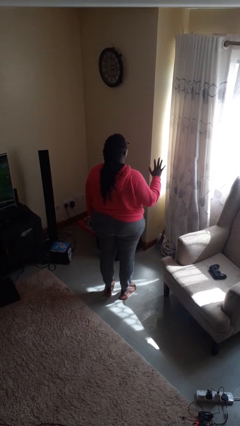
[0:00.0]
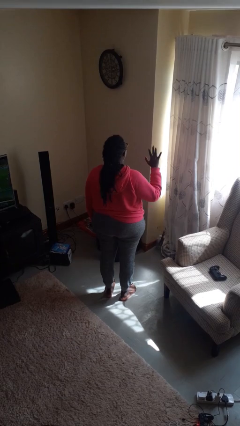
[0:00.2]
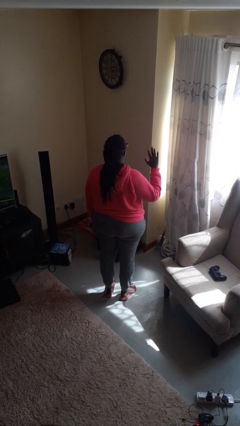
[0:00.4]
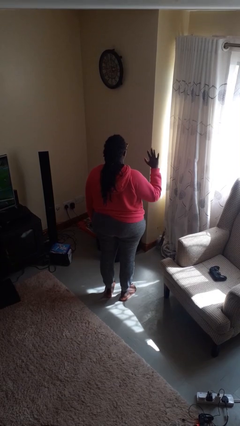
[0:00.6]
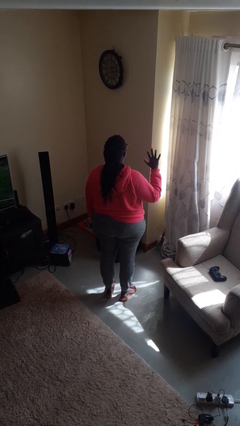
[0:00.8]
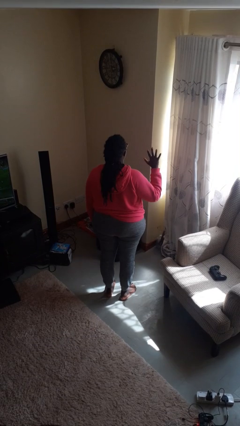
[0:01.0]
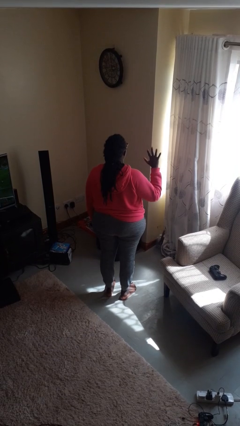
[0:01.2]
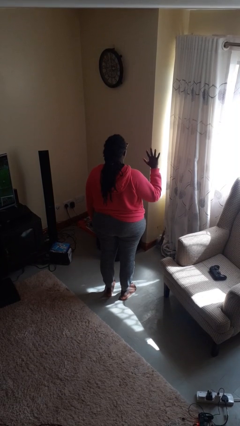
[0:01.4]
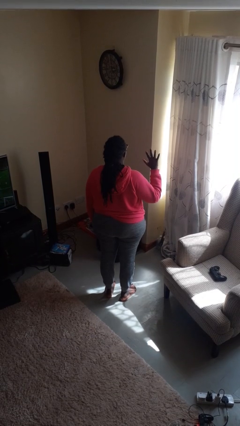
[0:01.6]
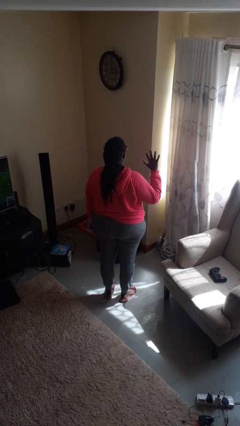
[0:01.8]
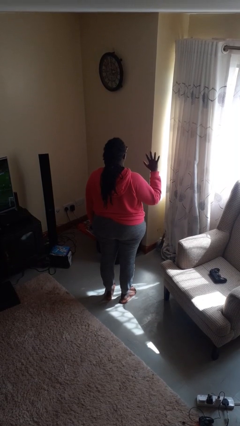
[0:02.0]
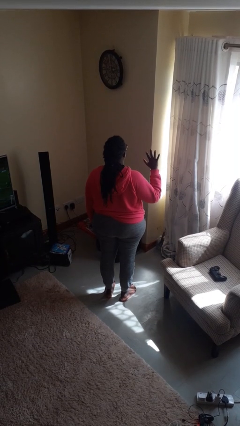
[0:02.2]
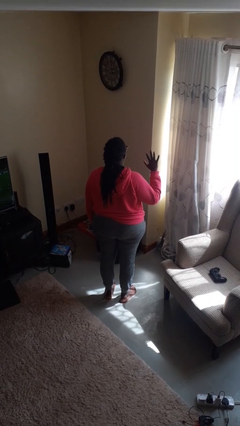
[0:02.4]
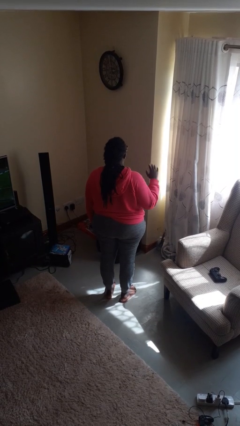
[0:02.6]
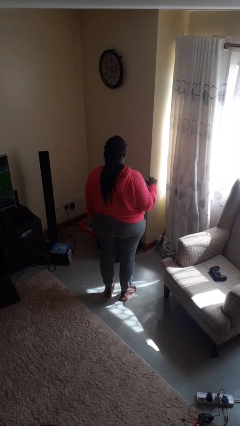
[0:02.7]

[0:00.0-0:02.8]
person gestures number five

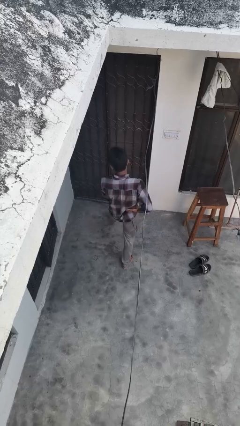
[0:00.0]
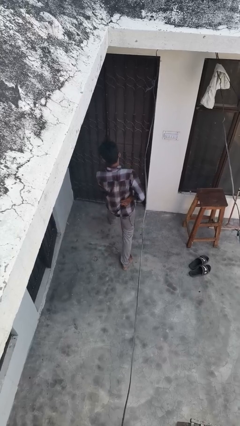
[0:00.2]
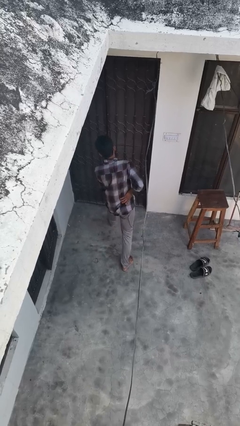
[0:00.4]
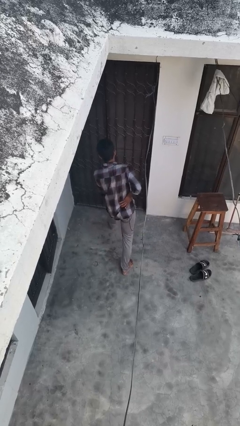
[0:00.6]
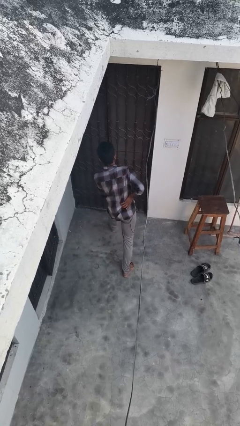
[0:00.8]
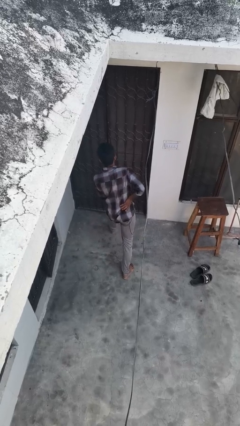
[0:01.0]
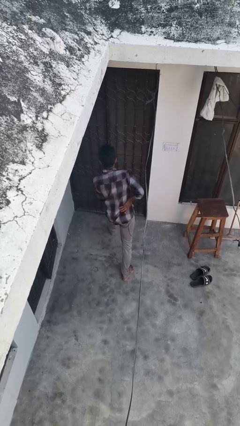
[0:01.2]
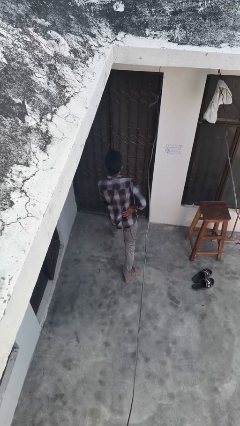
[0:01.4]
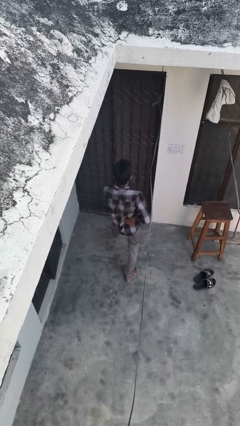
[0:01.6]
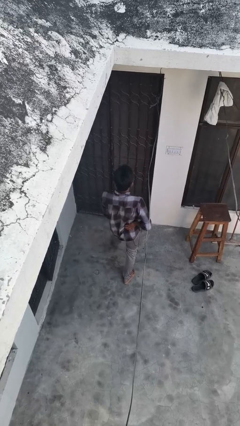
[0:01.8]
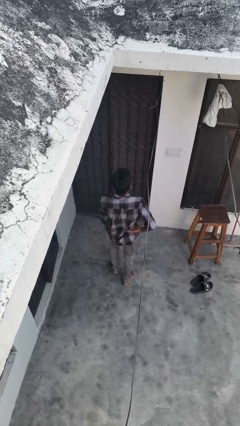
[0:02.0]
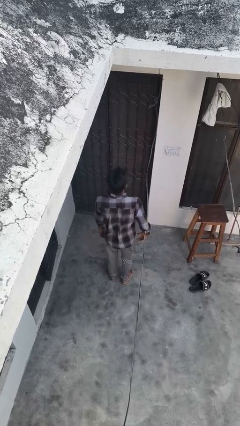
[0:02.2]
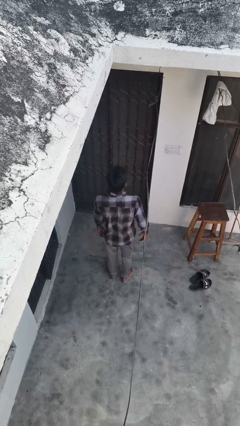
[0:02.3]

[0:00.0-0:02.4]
person exercises with lunges

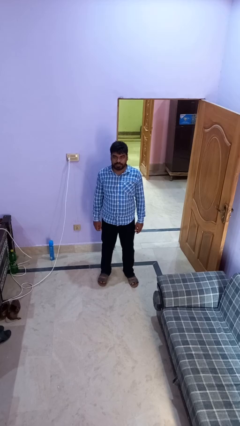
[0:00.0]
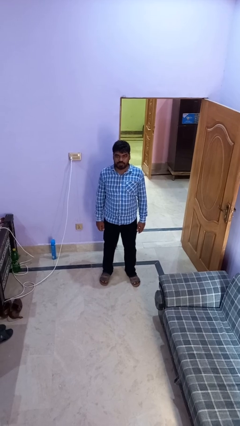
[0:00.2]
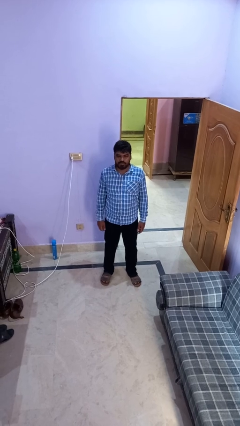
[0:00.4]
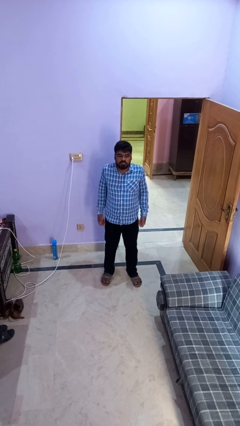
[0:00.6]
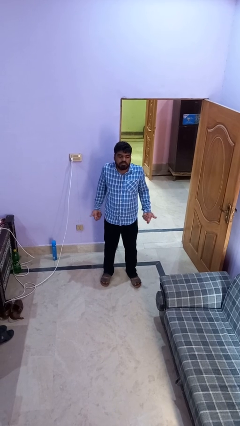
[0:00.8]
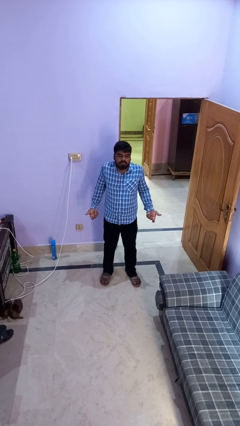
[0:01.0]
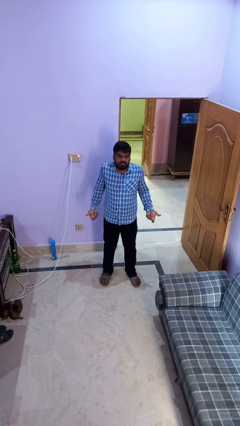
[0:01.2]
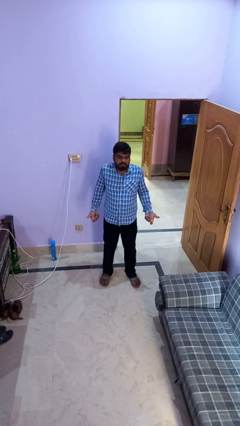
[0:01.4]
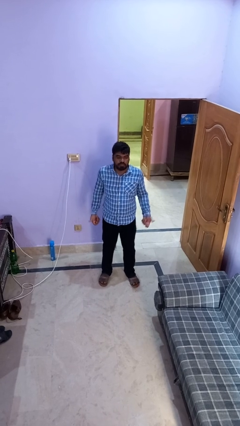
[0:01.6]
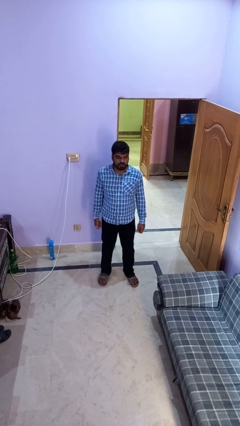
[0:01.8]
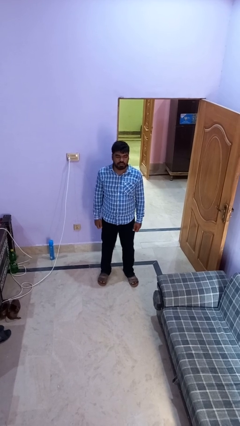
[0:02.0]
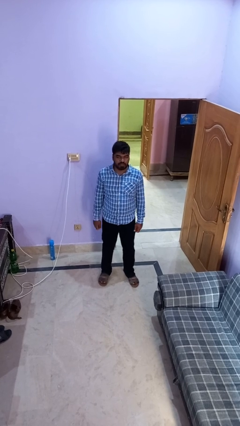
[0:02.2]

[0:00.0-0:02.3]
person shrugs

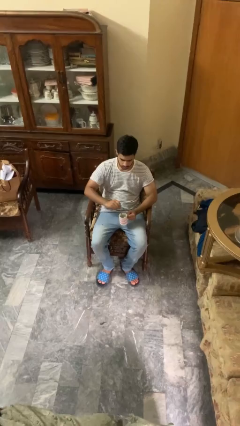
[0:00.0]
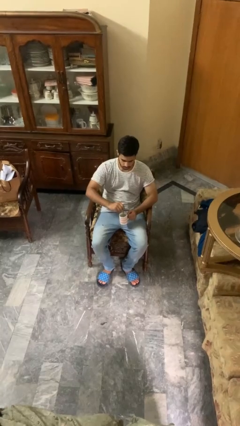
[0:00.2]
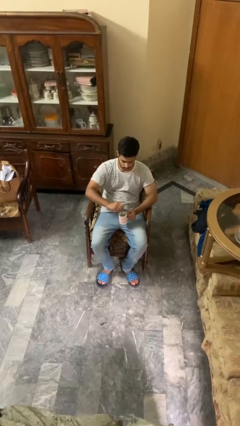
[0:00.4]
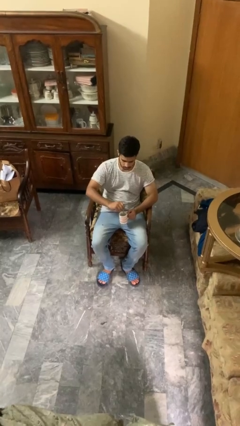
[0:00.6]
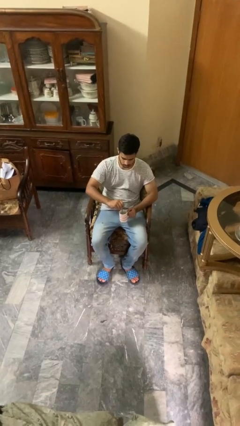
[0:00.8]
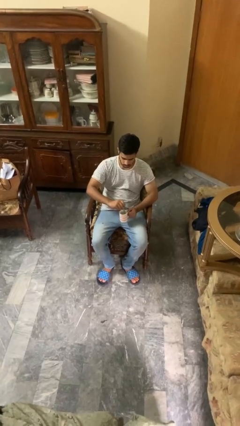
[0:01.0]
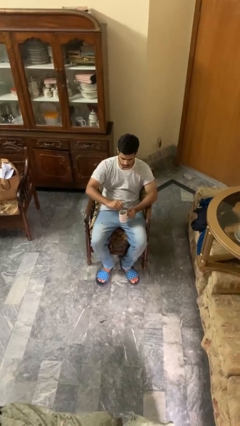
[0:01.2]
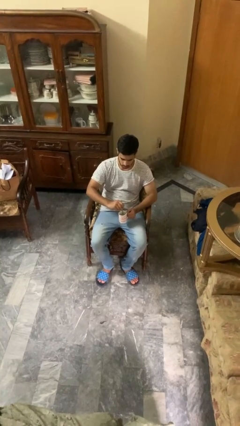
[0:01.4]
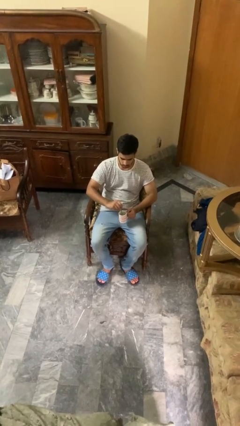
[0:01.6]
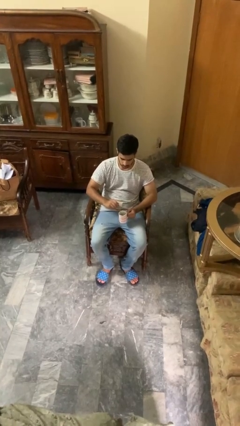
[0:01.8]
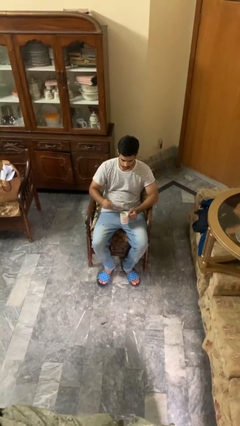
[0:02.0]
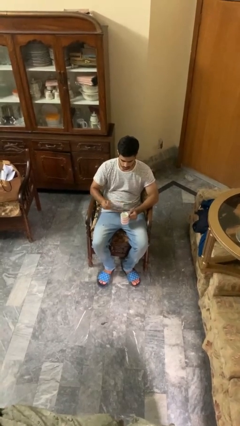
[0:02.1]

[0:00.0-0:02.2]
person stirs mug

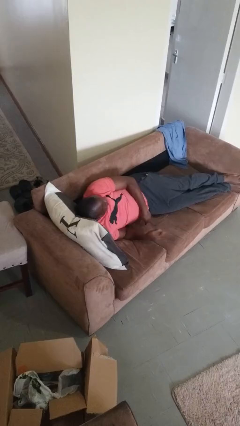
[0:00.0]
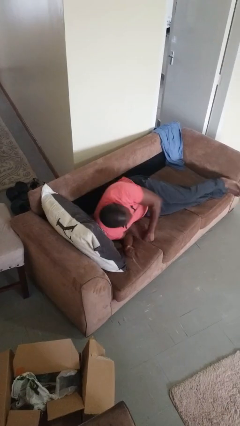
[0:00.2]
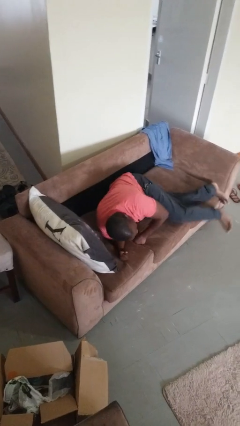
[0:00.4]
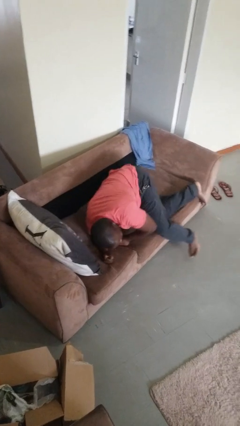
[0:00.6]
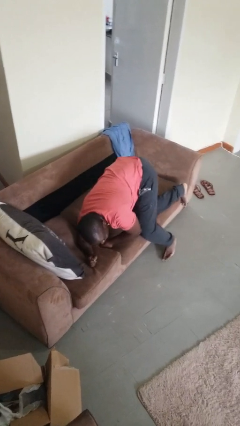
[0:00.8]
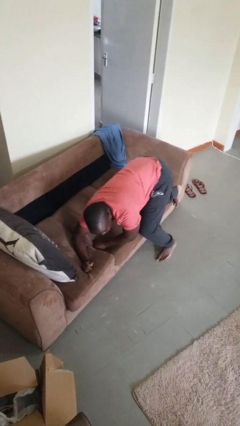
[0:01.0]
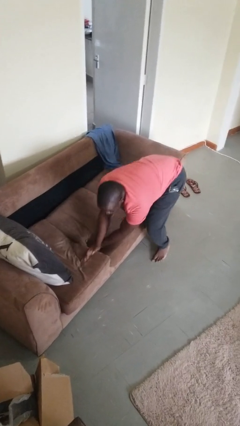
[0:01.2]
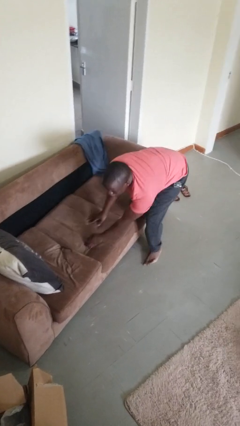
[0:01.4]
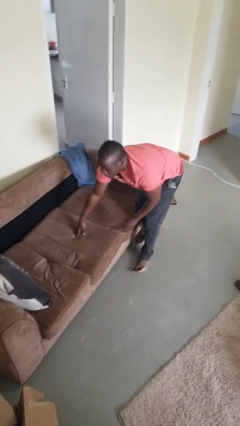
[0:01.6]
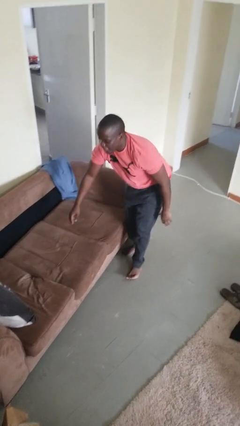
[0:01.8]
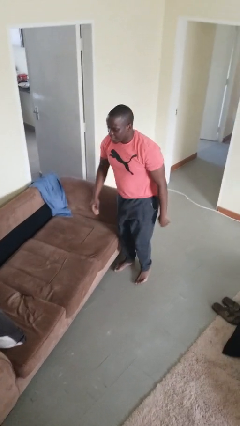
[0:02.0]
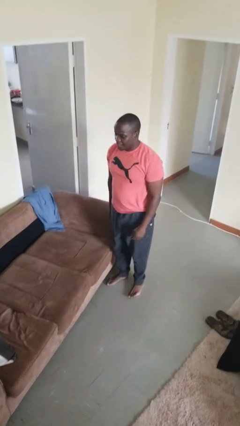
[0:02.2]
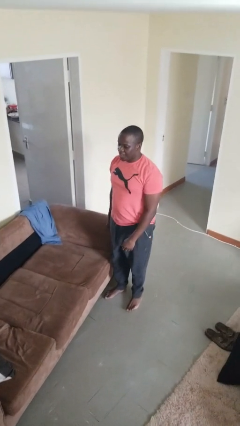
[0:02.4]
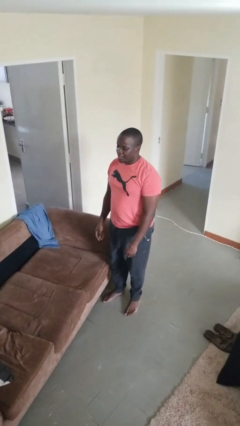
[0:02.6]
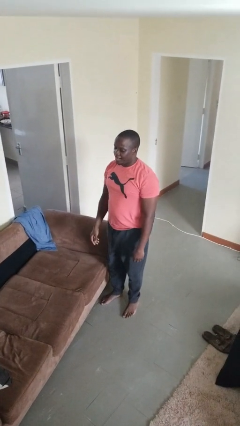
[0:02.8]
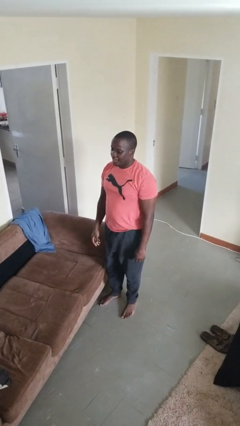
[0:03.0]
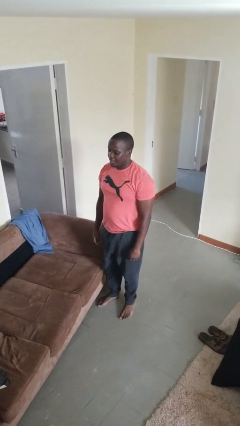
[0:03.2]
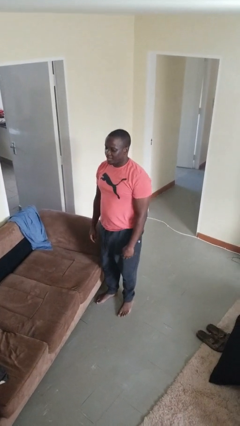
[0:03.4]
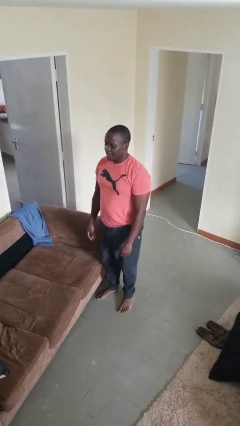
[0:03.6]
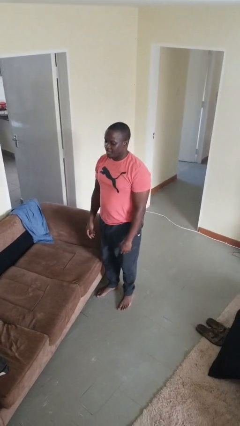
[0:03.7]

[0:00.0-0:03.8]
person stands up

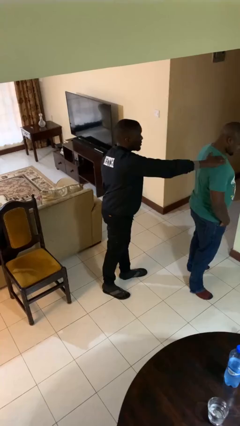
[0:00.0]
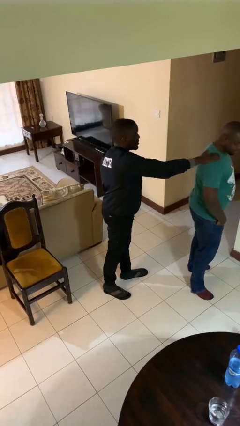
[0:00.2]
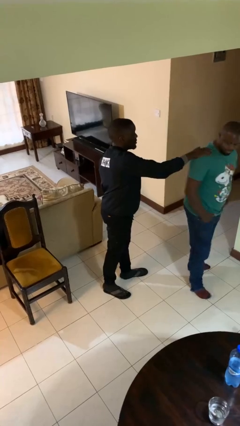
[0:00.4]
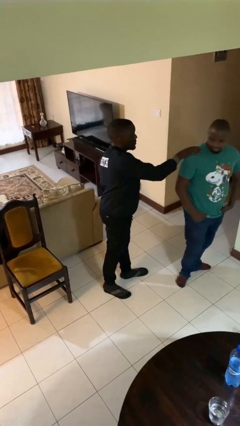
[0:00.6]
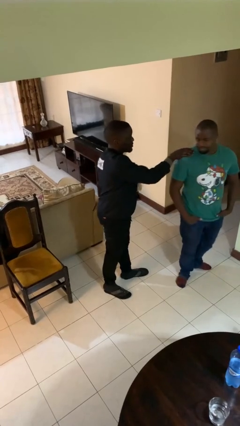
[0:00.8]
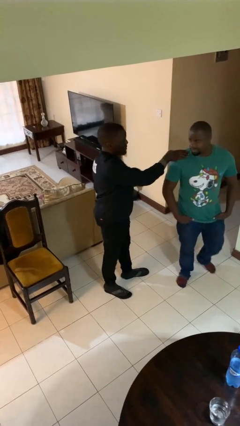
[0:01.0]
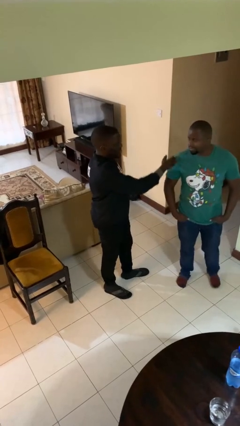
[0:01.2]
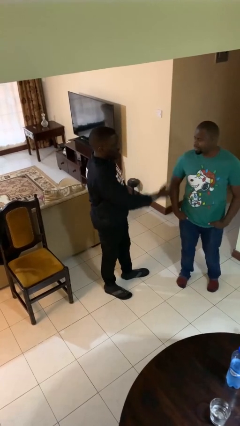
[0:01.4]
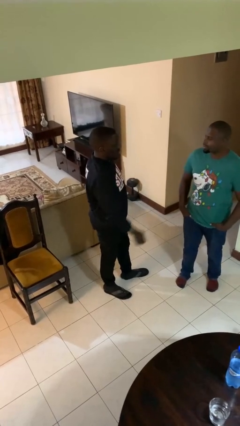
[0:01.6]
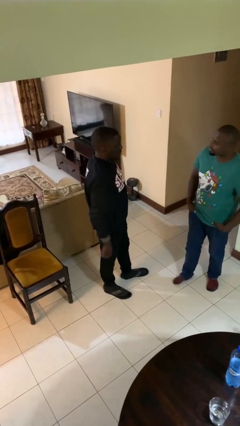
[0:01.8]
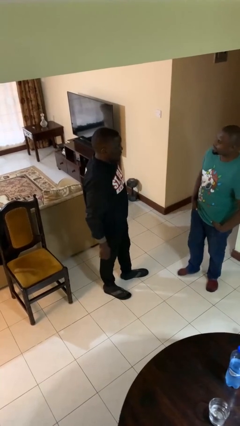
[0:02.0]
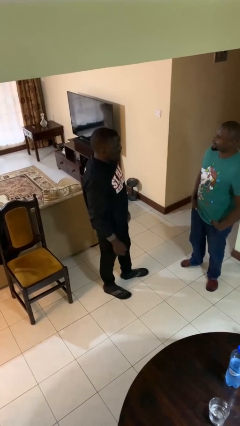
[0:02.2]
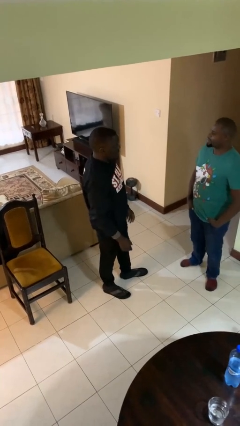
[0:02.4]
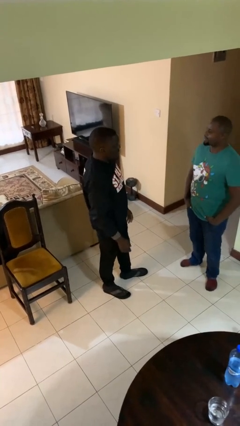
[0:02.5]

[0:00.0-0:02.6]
person spins person around

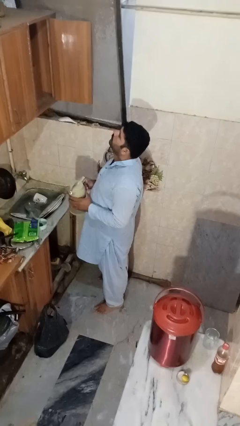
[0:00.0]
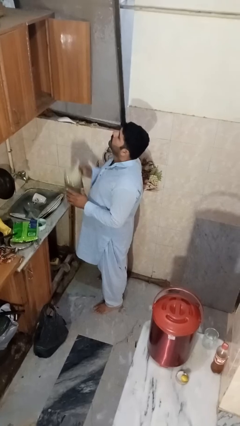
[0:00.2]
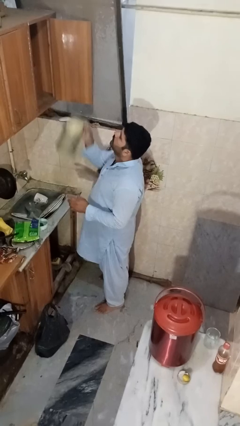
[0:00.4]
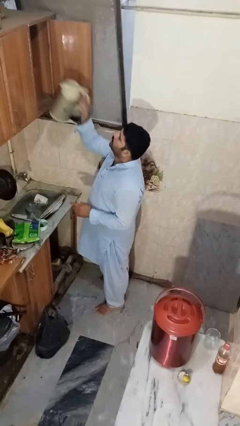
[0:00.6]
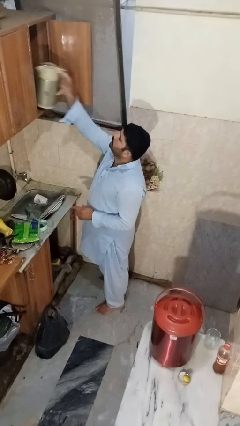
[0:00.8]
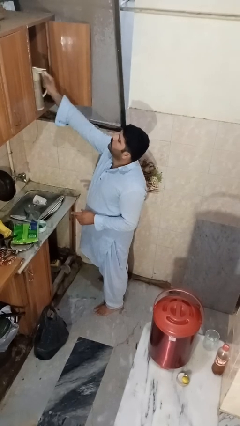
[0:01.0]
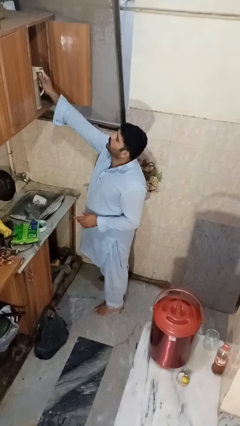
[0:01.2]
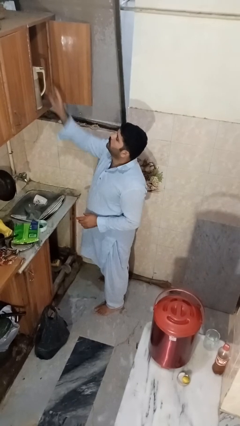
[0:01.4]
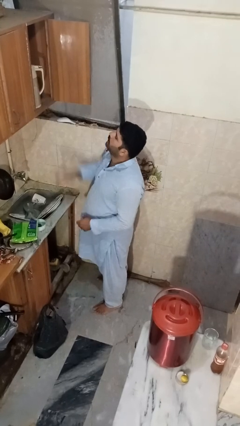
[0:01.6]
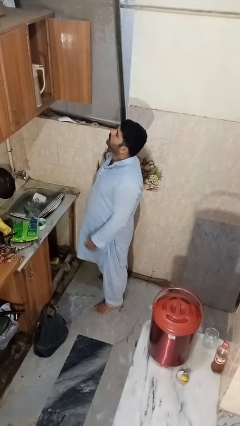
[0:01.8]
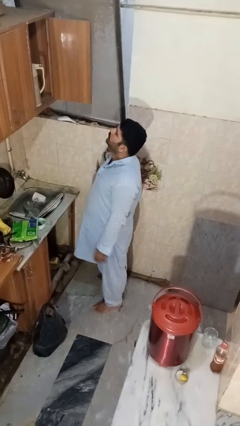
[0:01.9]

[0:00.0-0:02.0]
person puts object in cabinet
